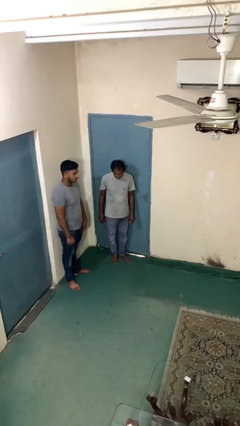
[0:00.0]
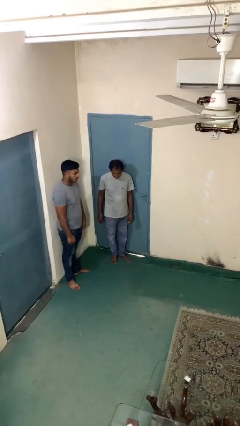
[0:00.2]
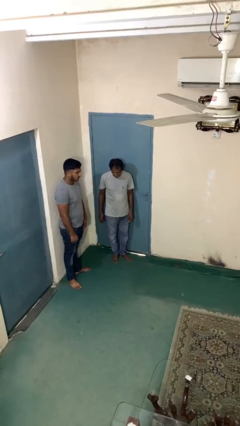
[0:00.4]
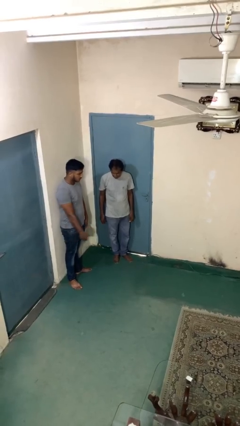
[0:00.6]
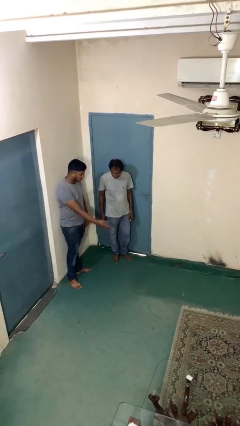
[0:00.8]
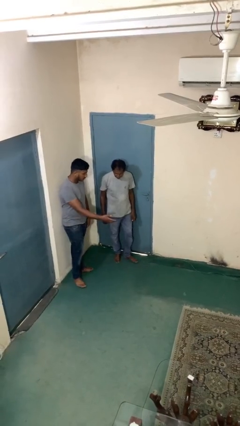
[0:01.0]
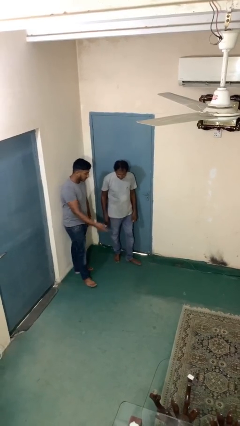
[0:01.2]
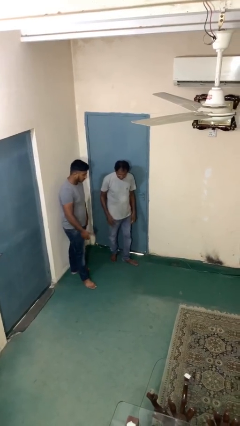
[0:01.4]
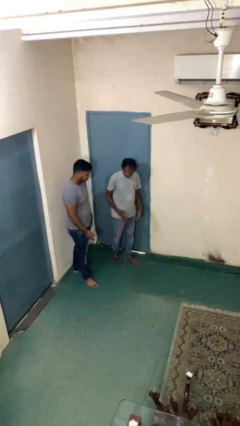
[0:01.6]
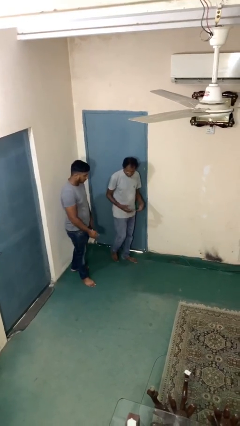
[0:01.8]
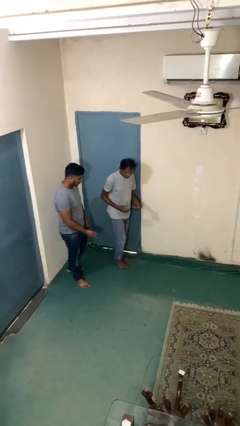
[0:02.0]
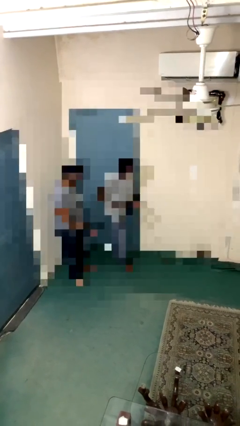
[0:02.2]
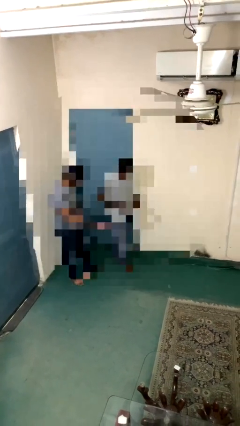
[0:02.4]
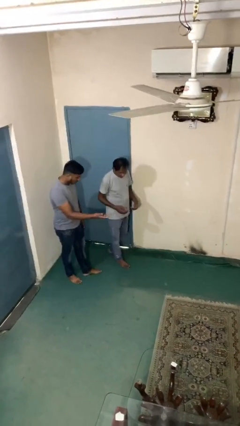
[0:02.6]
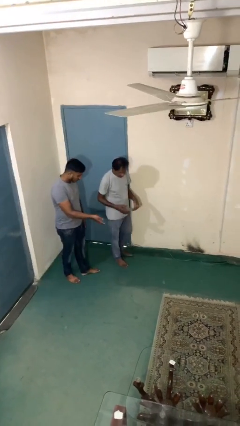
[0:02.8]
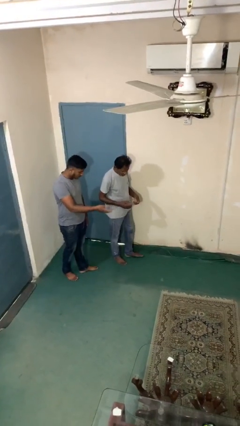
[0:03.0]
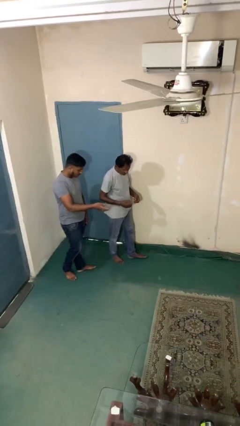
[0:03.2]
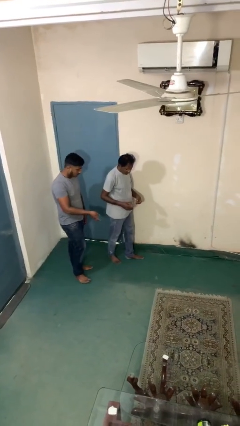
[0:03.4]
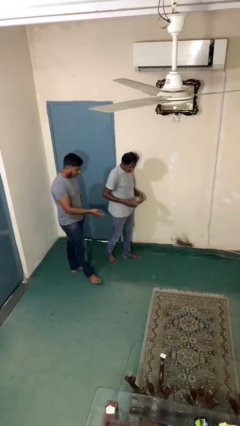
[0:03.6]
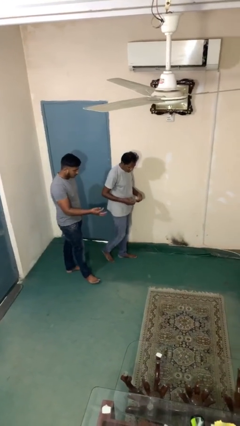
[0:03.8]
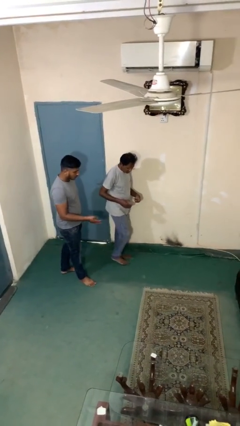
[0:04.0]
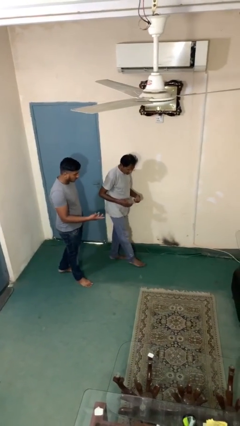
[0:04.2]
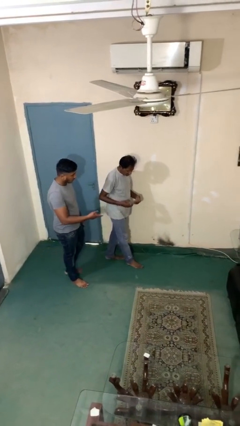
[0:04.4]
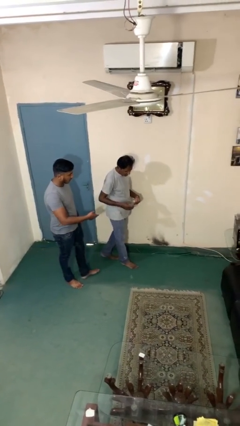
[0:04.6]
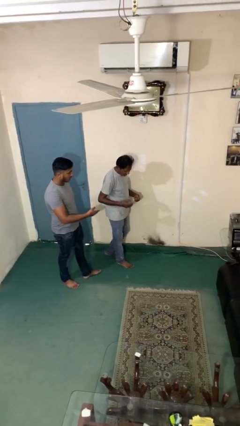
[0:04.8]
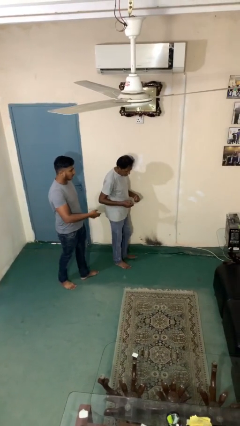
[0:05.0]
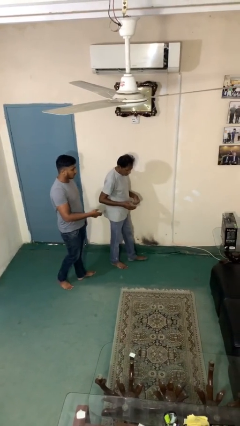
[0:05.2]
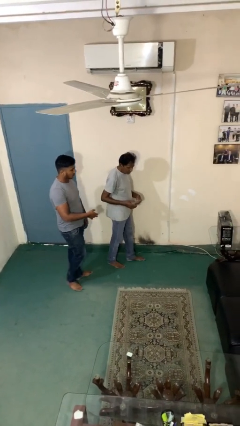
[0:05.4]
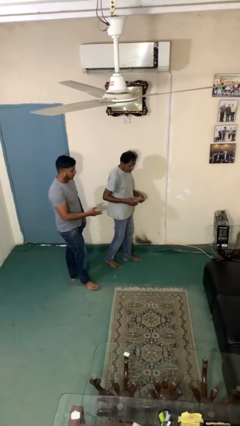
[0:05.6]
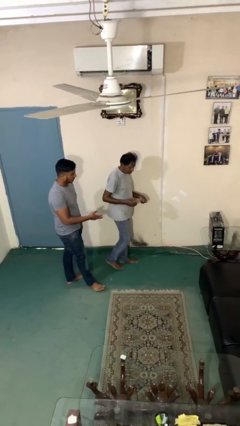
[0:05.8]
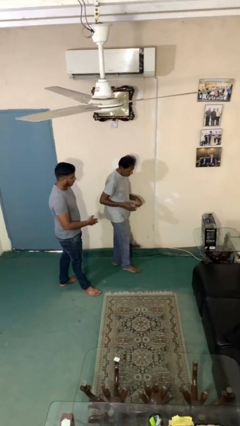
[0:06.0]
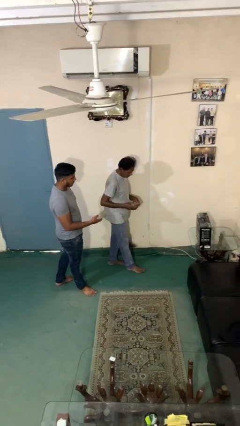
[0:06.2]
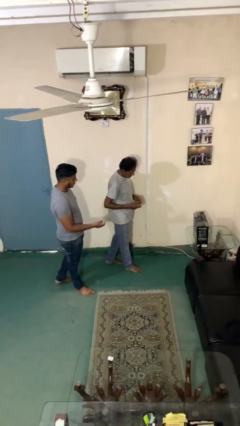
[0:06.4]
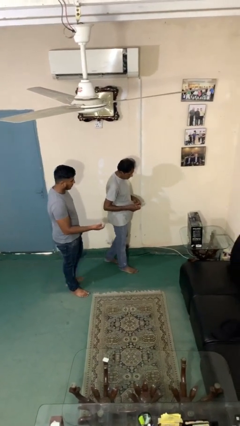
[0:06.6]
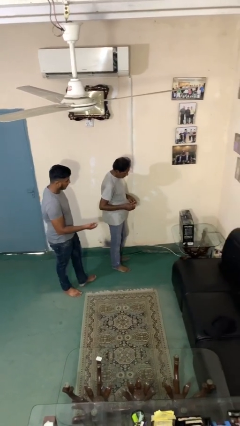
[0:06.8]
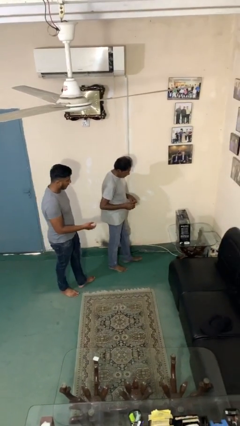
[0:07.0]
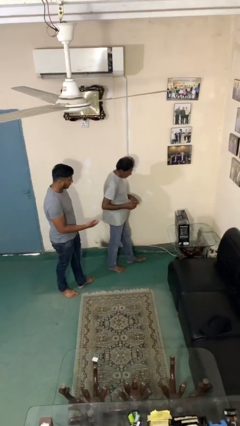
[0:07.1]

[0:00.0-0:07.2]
person talks to person

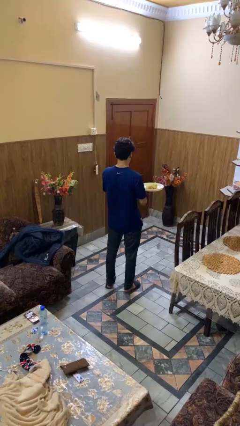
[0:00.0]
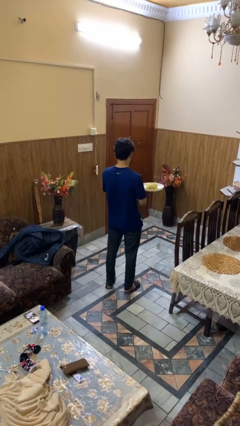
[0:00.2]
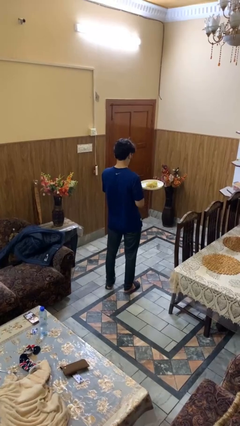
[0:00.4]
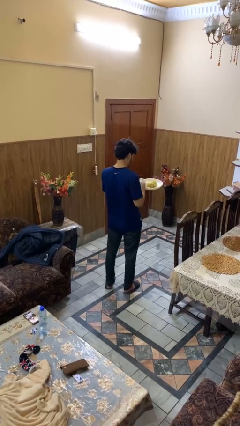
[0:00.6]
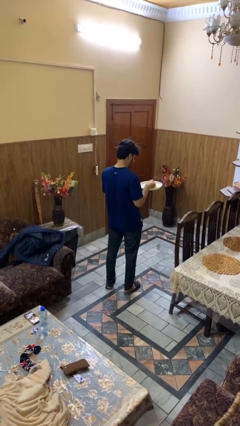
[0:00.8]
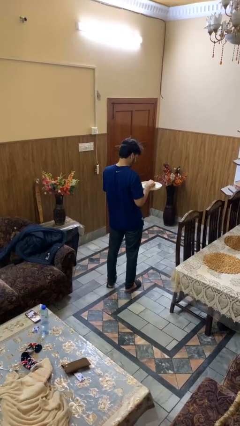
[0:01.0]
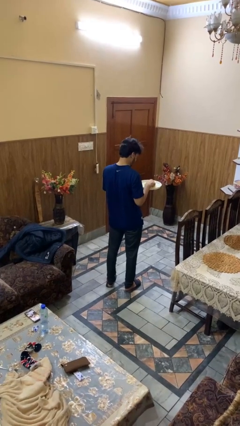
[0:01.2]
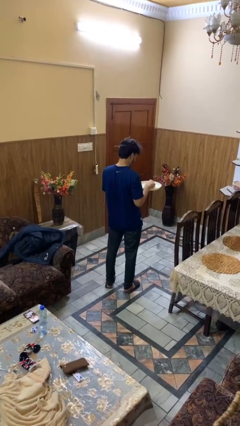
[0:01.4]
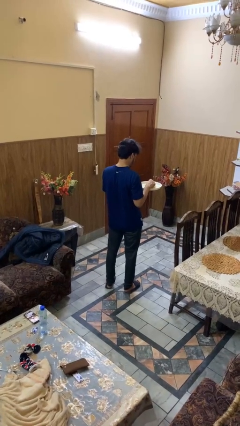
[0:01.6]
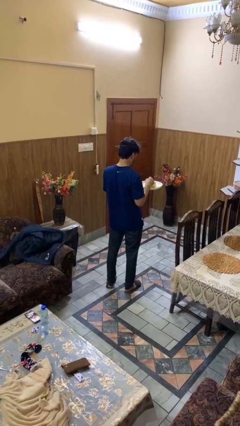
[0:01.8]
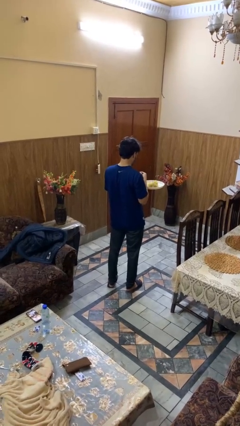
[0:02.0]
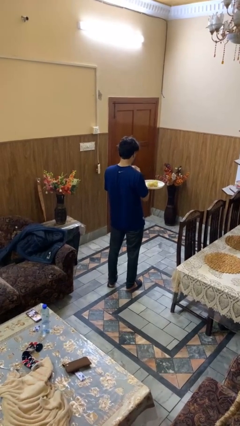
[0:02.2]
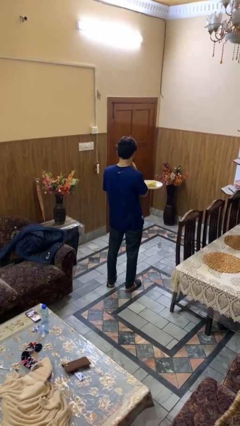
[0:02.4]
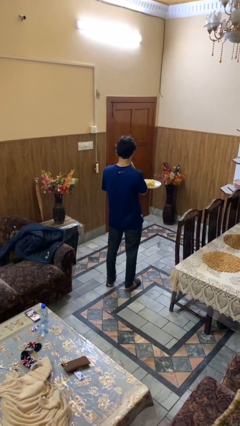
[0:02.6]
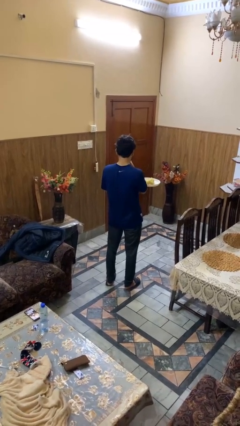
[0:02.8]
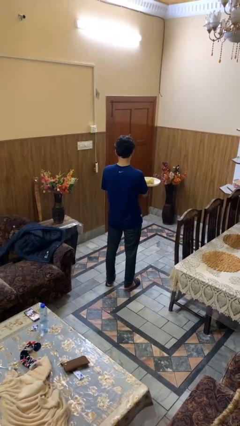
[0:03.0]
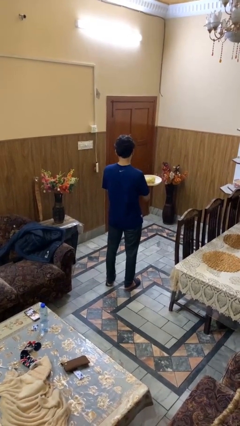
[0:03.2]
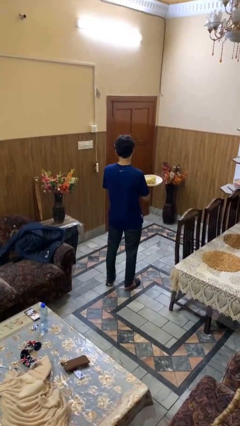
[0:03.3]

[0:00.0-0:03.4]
person eats with hands

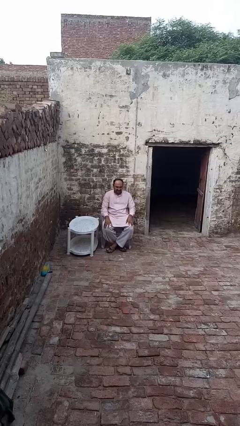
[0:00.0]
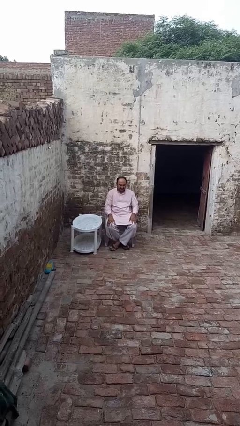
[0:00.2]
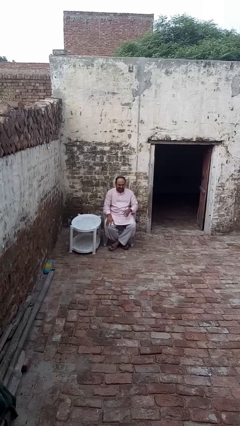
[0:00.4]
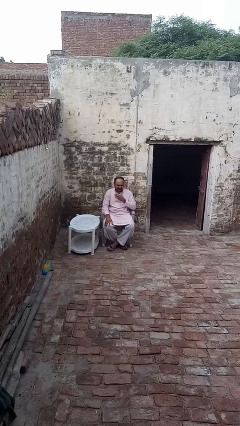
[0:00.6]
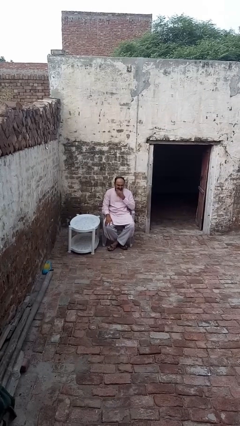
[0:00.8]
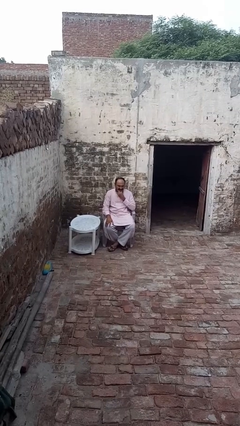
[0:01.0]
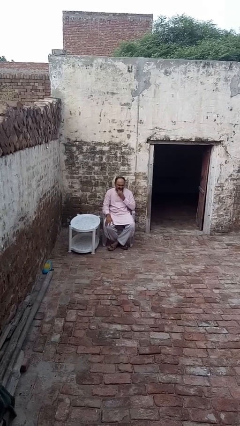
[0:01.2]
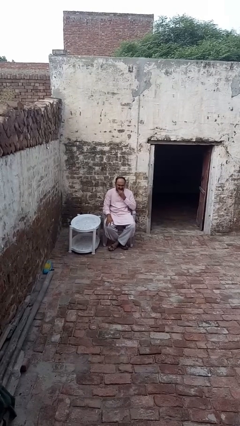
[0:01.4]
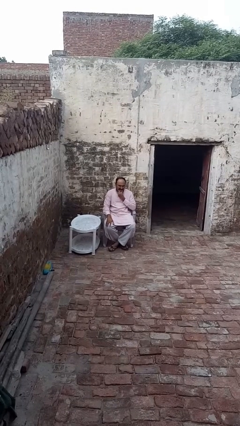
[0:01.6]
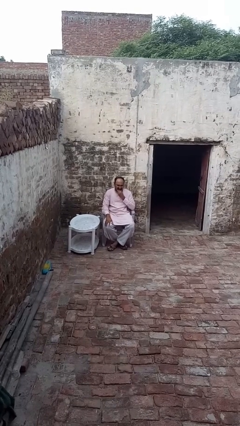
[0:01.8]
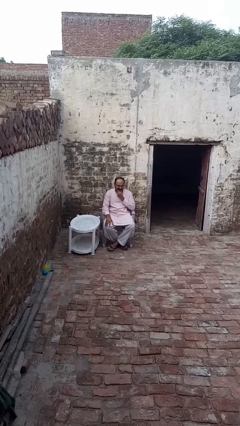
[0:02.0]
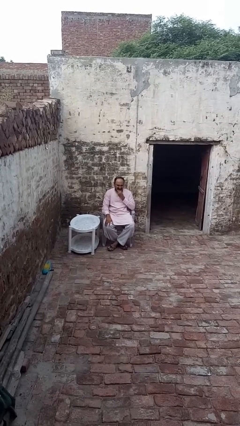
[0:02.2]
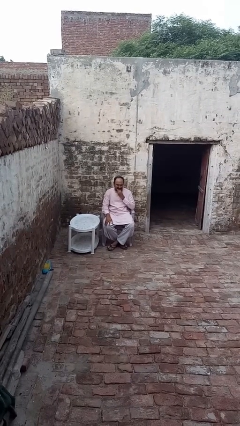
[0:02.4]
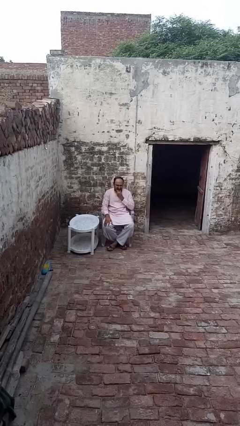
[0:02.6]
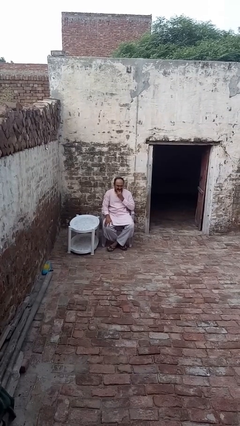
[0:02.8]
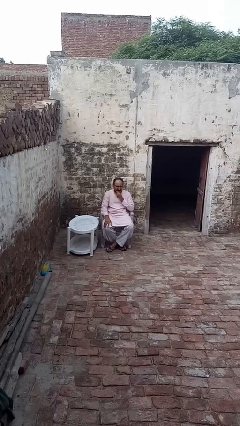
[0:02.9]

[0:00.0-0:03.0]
person strokes chin

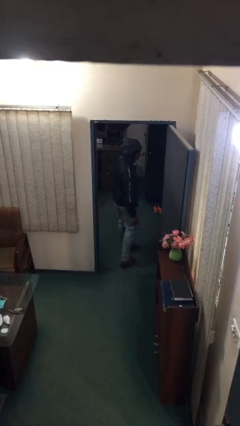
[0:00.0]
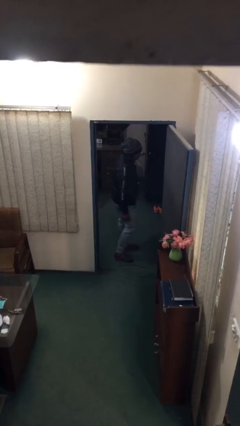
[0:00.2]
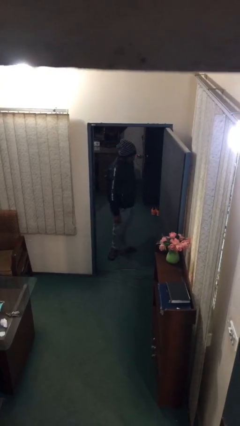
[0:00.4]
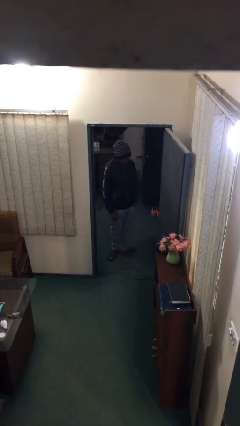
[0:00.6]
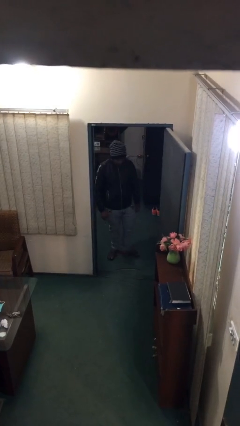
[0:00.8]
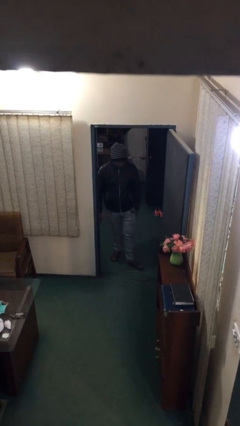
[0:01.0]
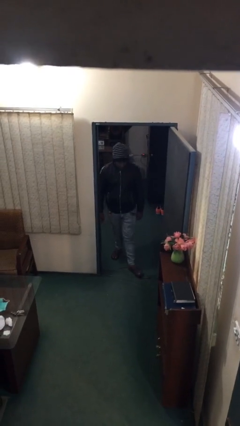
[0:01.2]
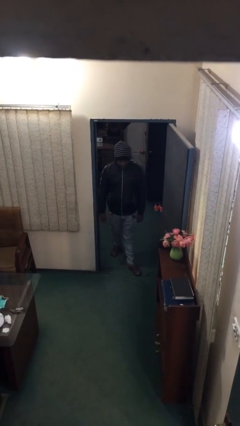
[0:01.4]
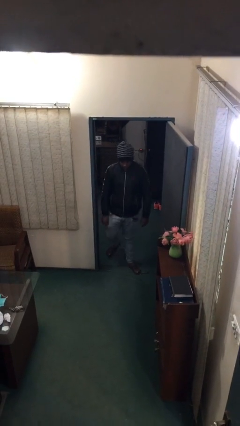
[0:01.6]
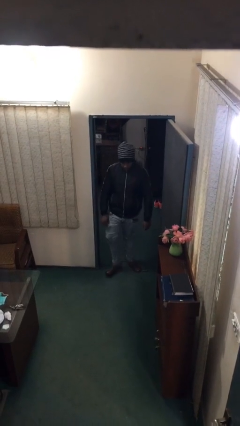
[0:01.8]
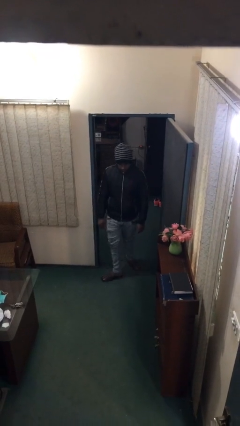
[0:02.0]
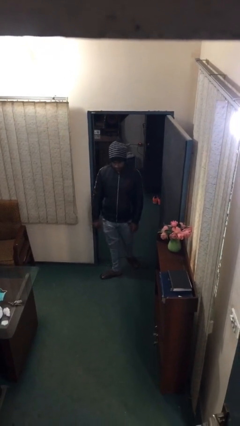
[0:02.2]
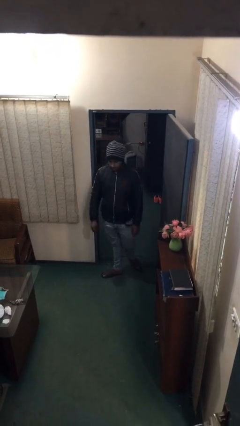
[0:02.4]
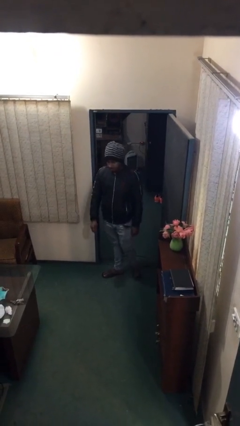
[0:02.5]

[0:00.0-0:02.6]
person enters scene through structure

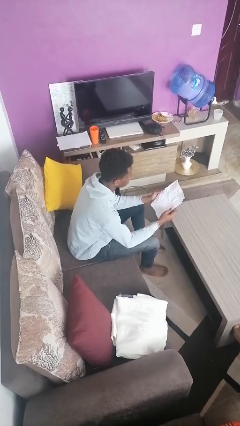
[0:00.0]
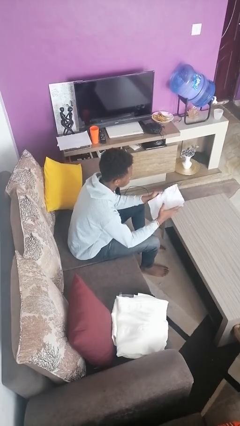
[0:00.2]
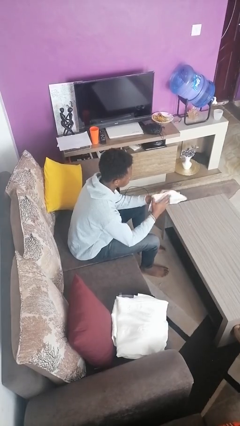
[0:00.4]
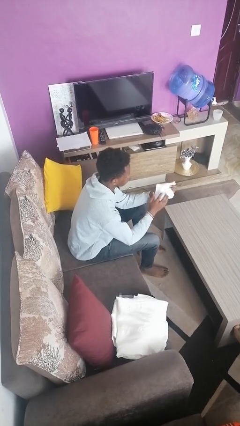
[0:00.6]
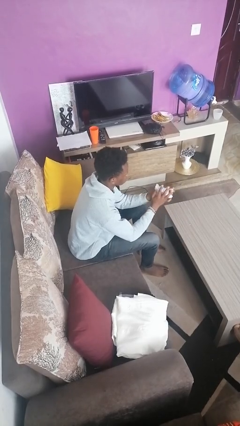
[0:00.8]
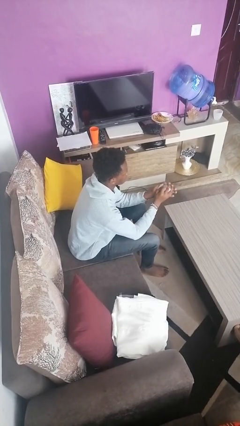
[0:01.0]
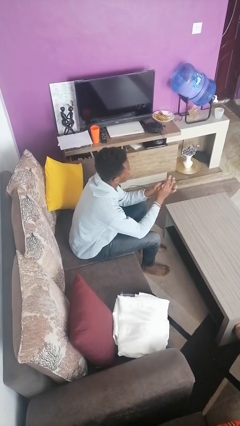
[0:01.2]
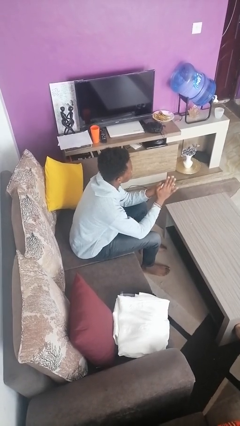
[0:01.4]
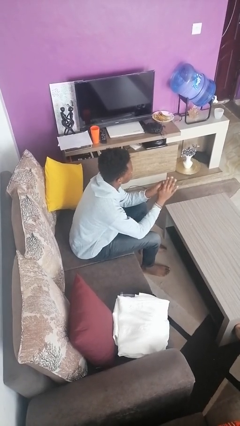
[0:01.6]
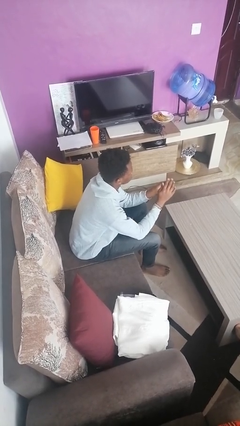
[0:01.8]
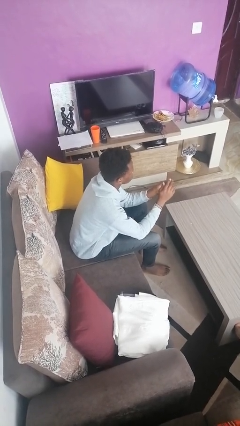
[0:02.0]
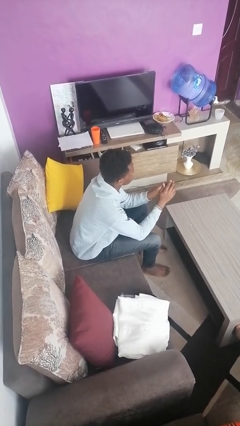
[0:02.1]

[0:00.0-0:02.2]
person crumples paper
